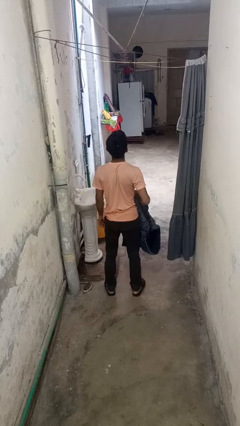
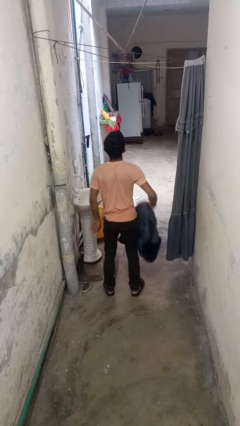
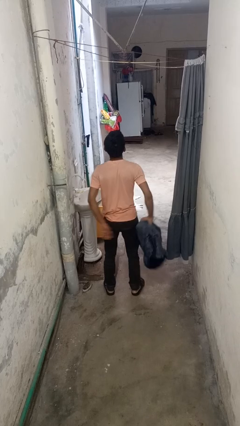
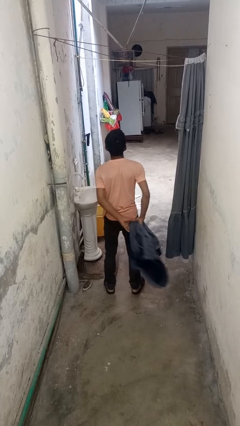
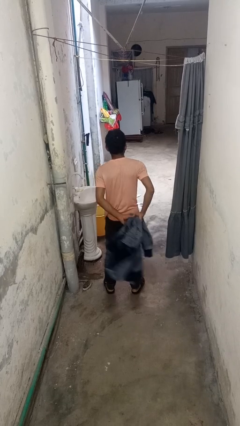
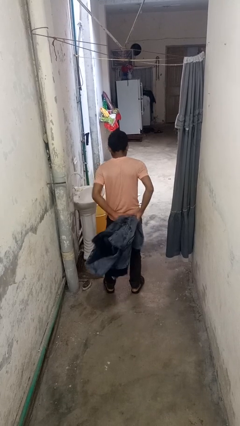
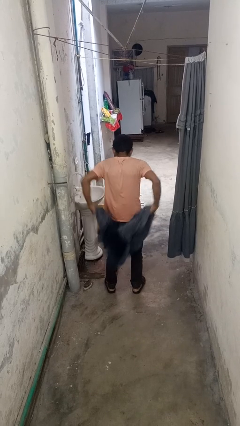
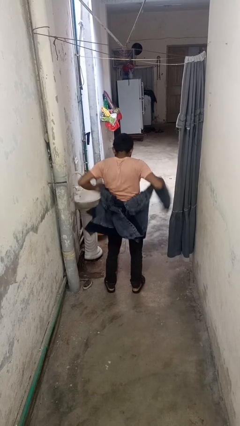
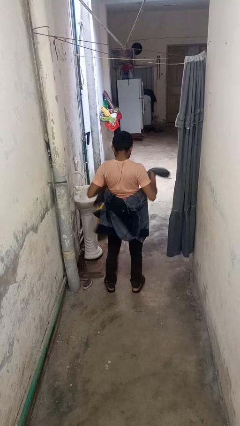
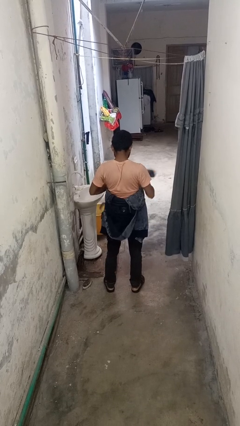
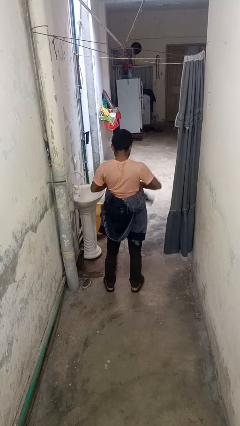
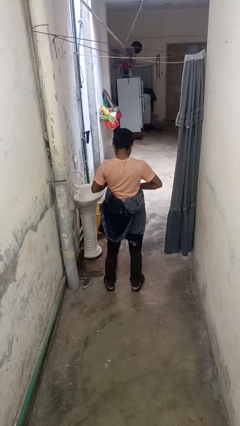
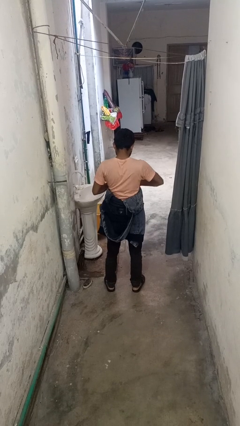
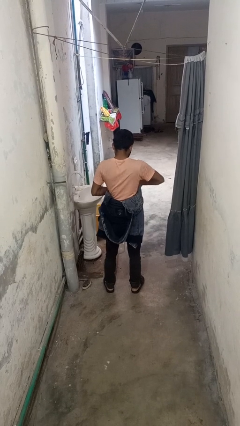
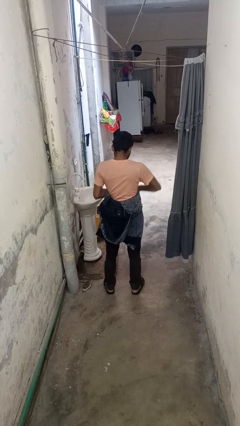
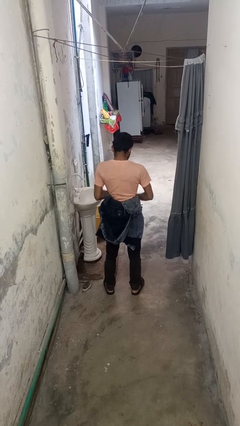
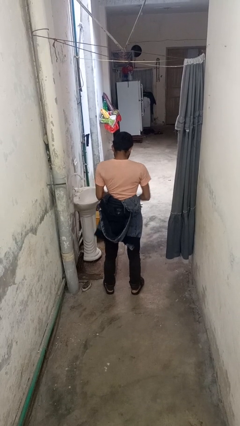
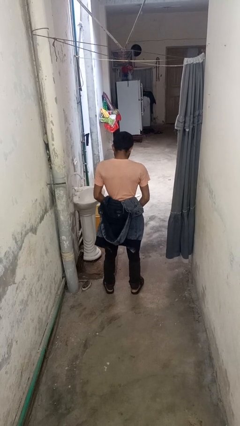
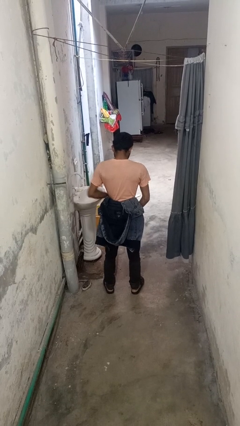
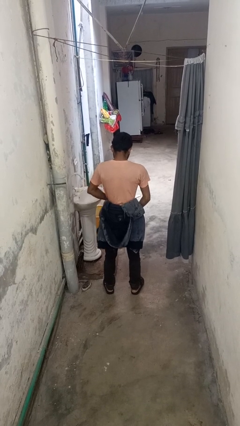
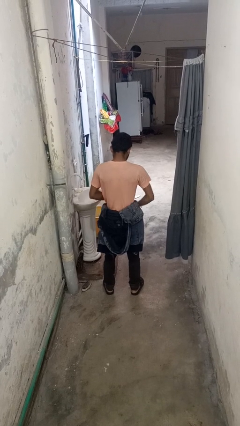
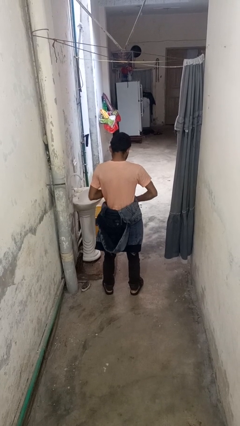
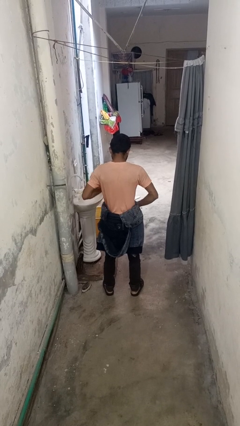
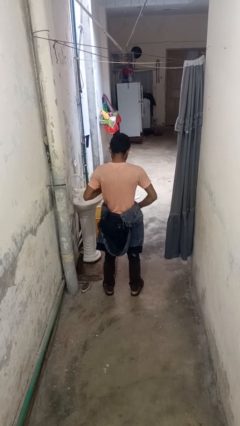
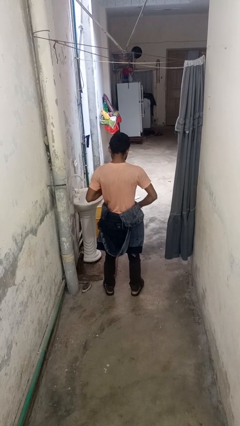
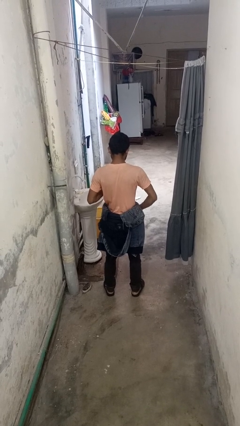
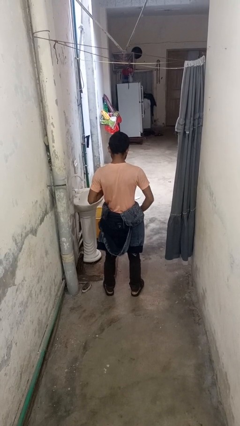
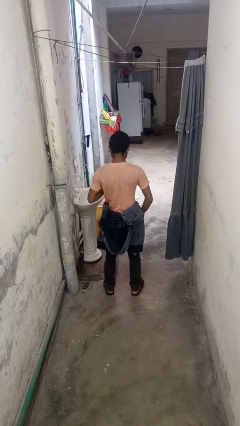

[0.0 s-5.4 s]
person ties jacket around waist

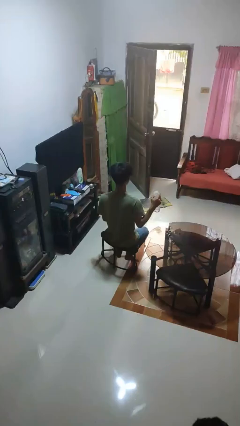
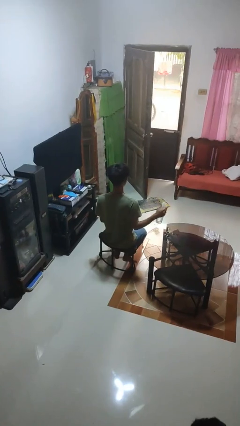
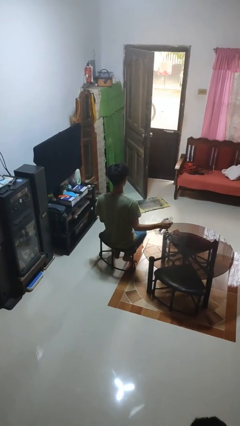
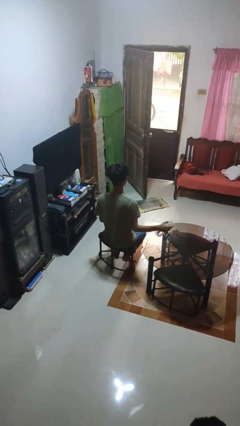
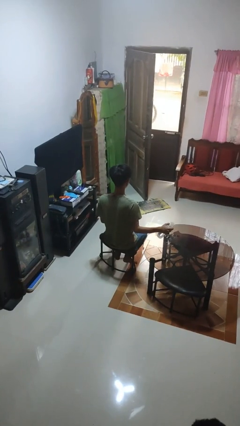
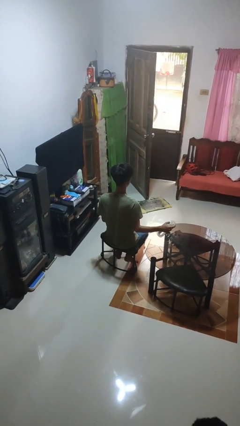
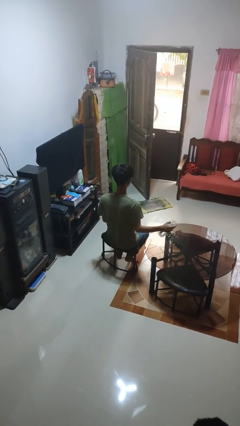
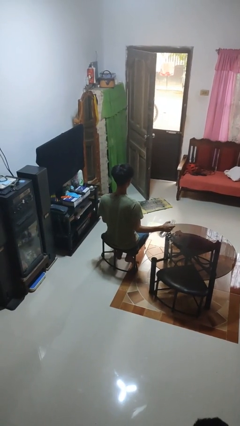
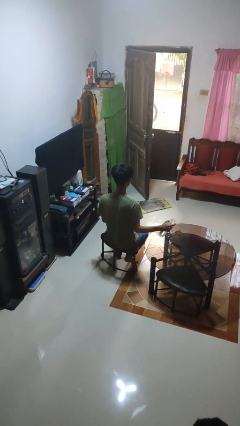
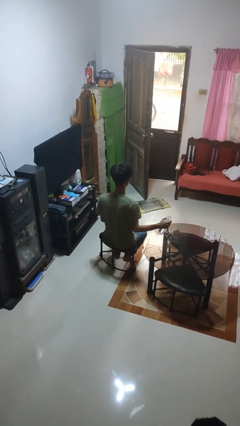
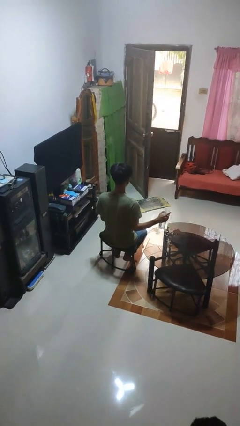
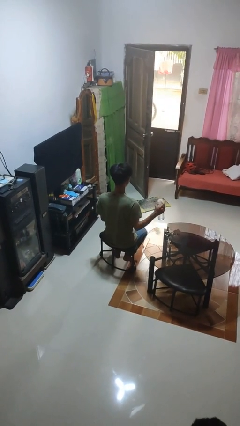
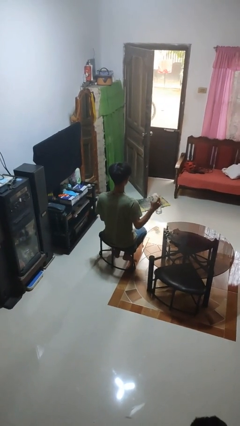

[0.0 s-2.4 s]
person sprays from bottle

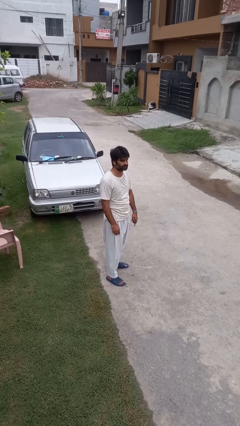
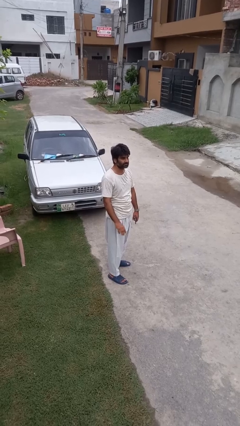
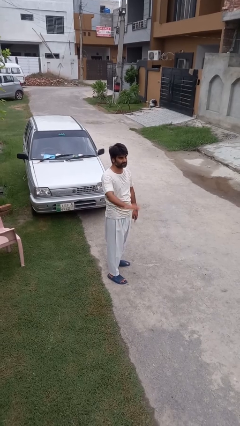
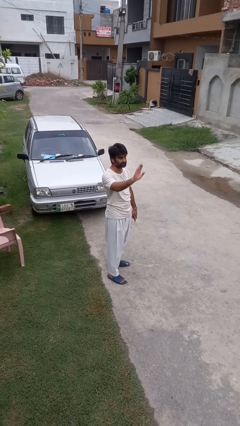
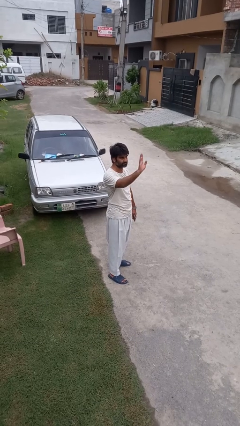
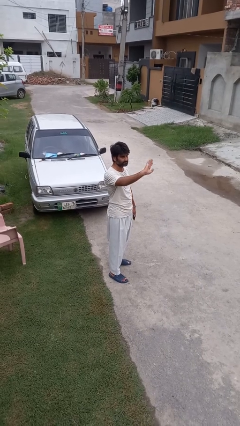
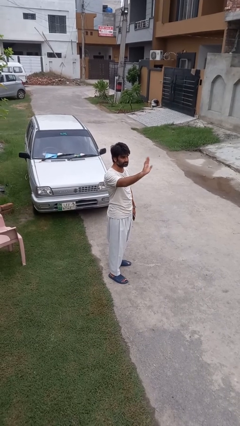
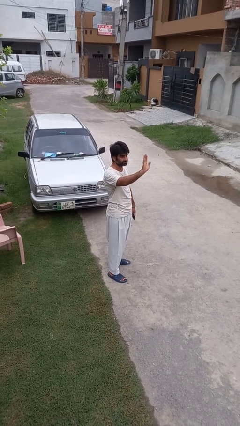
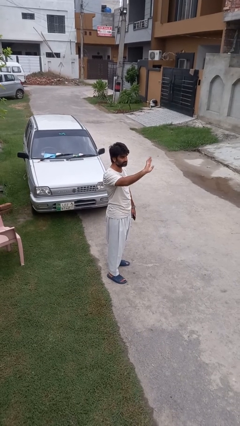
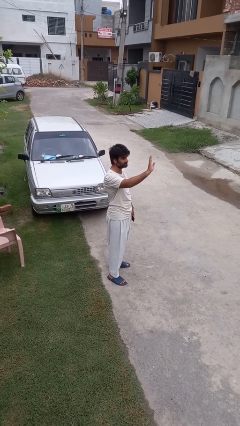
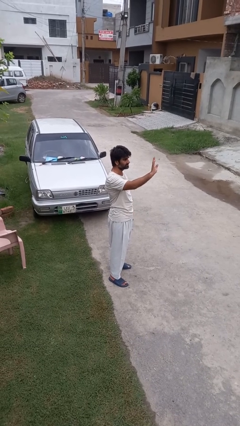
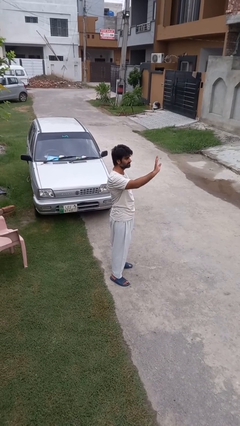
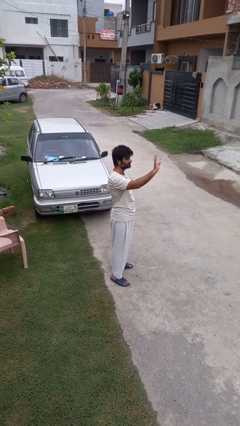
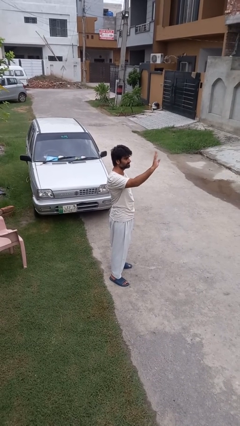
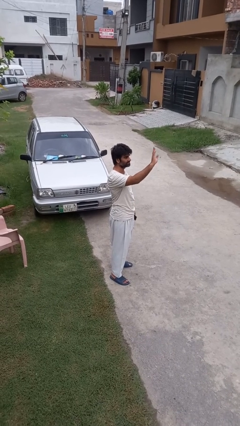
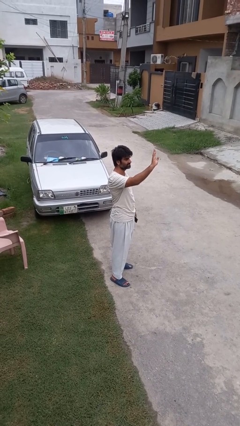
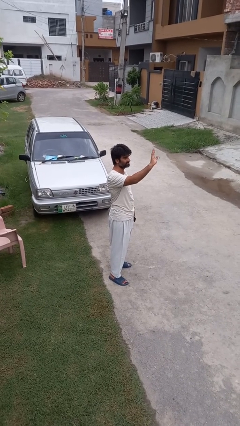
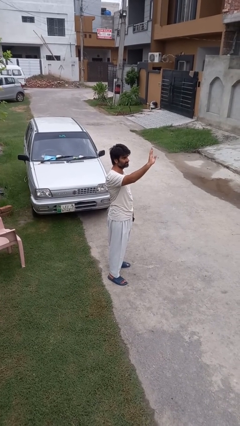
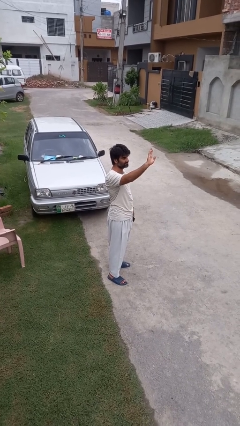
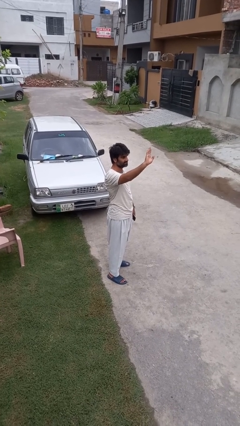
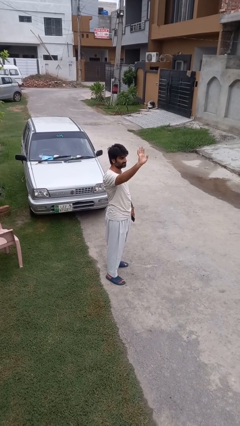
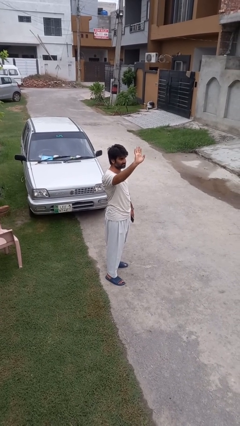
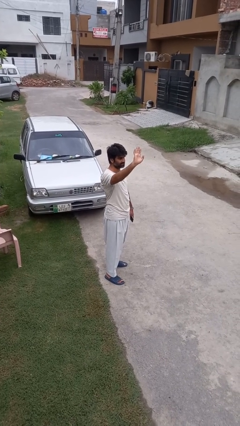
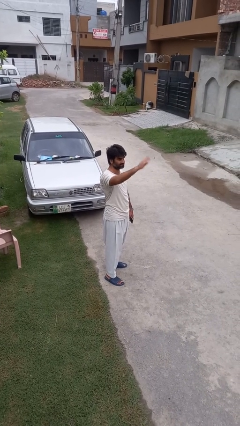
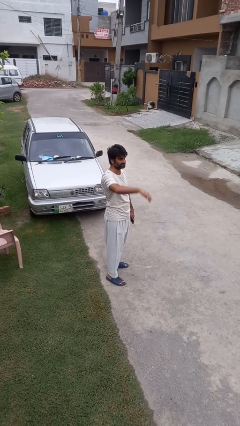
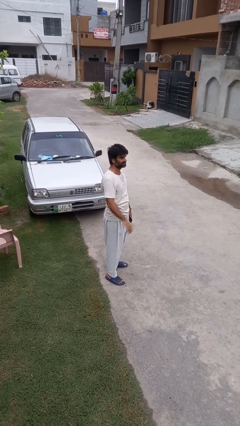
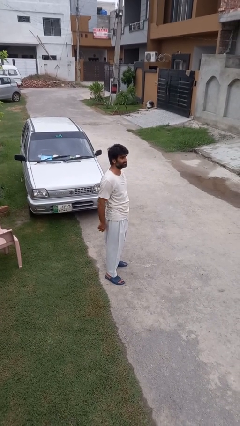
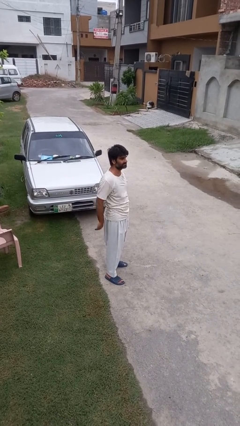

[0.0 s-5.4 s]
person waves at person

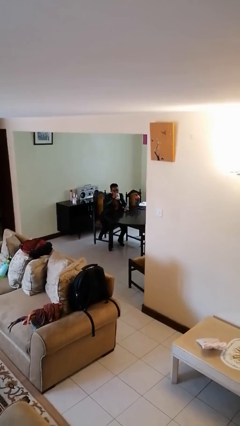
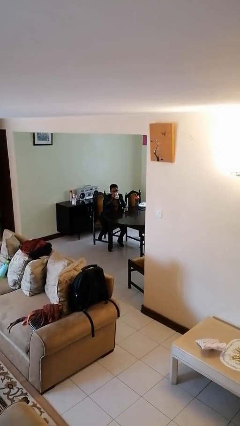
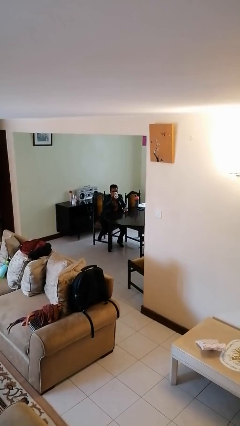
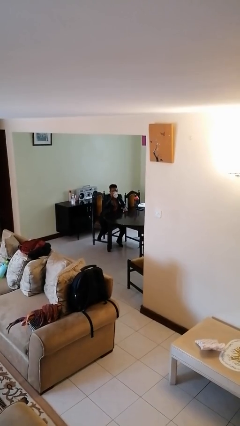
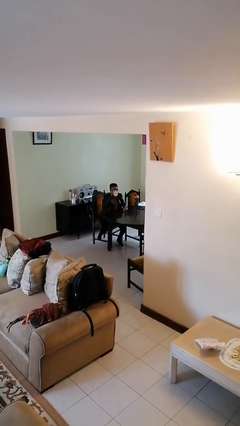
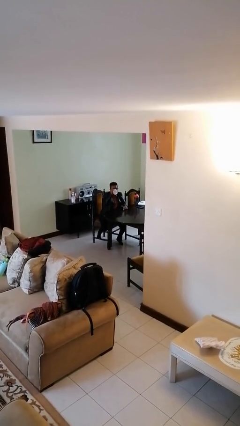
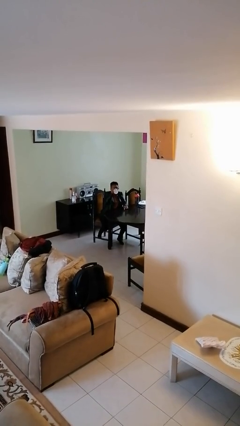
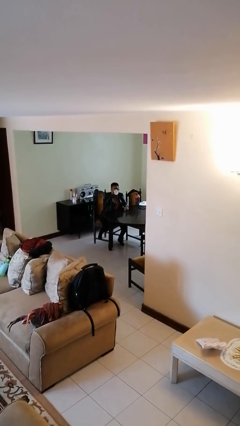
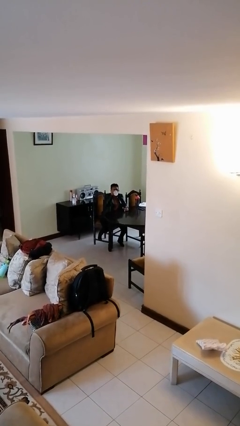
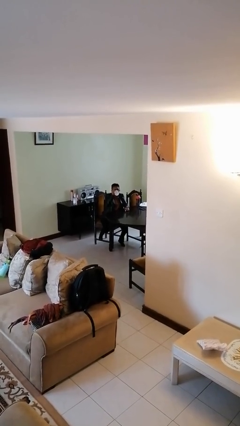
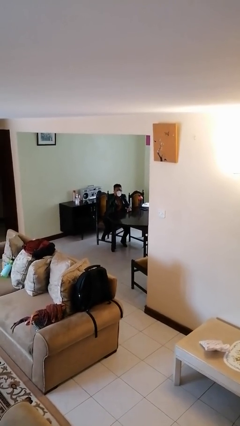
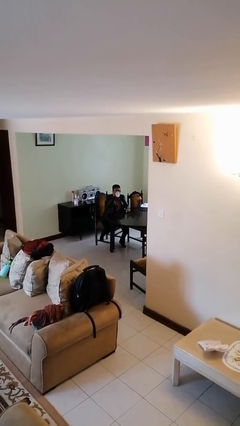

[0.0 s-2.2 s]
person drinks from mug

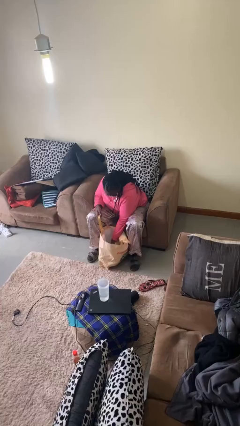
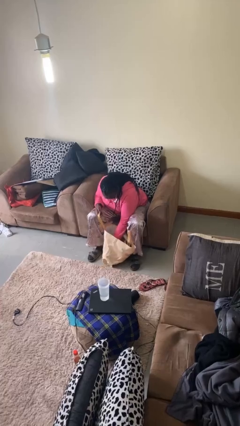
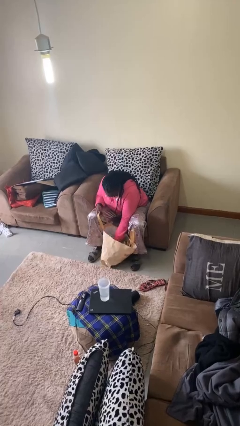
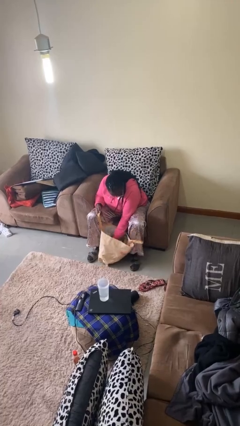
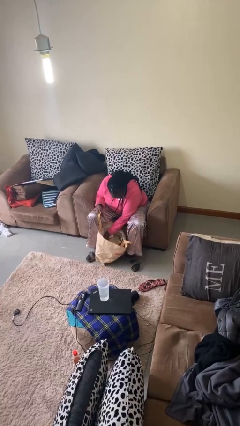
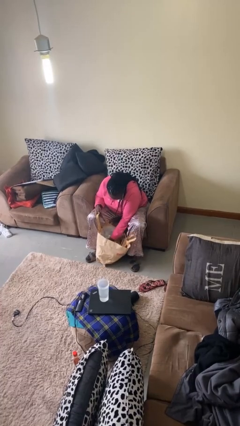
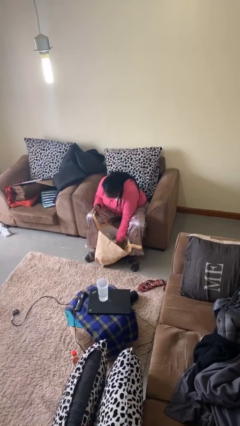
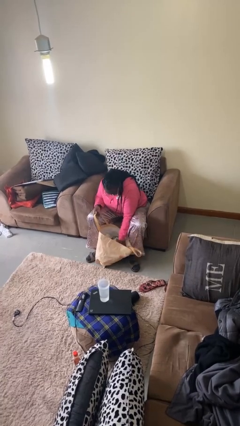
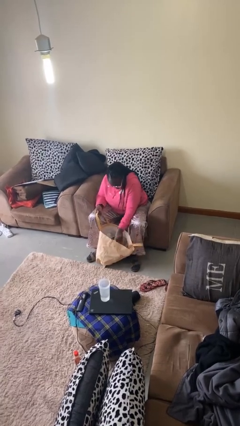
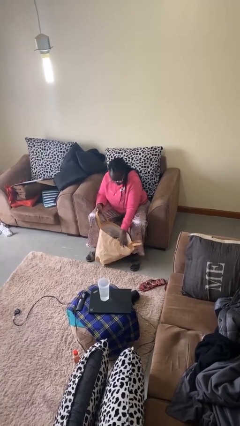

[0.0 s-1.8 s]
person searches in bag

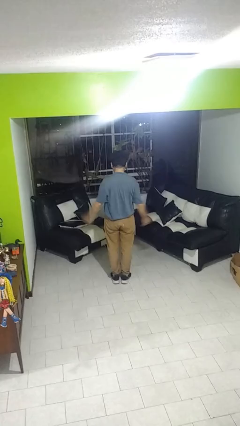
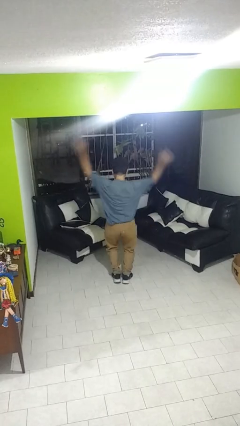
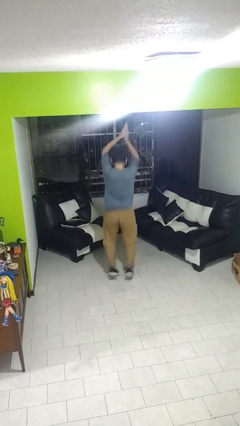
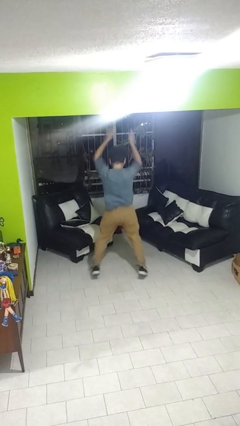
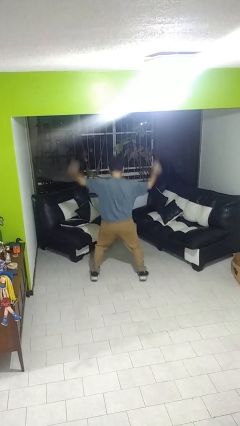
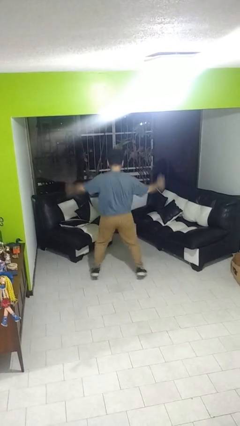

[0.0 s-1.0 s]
person exercises with jumping jacks
